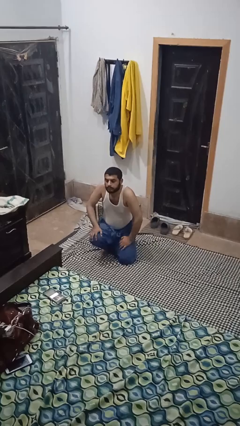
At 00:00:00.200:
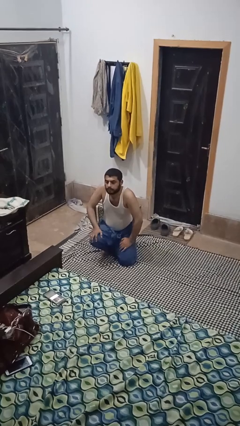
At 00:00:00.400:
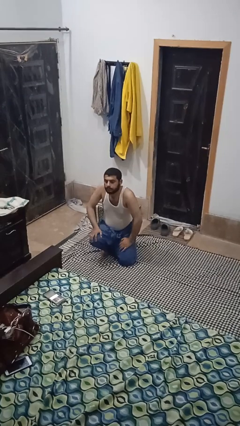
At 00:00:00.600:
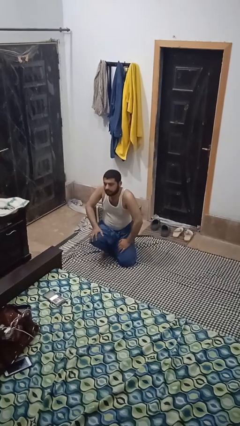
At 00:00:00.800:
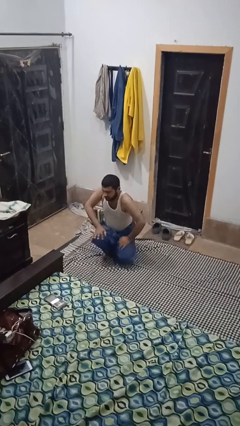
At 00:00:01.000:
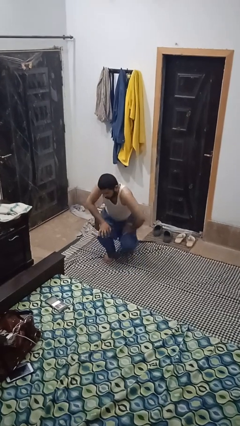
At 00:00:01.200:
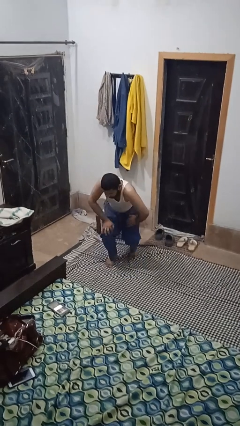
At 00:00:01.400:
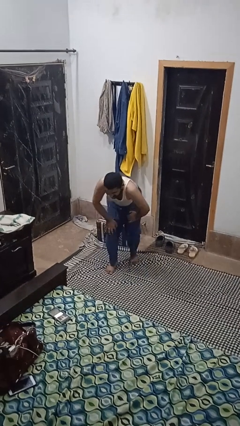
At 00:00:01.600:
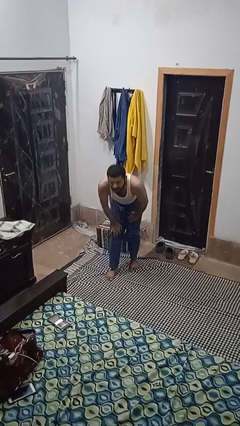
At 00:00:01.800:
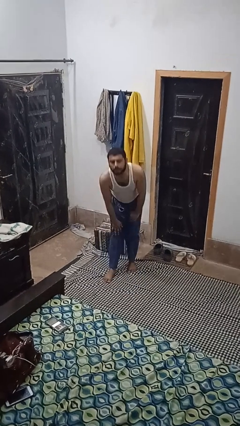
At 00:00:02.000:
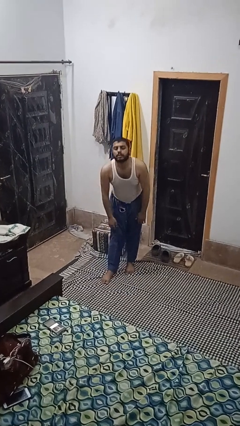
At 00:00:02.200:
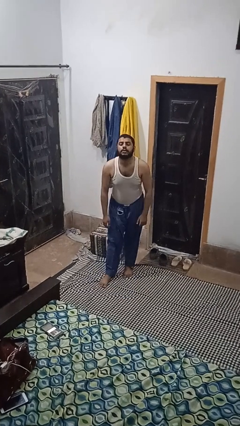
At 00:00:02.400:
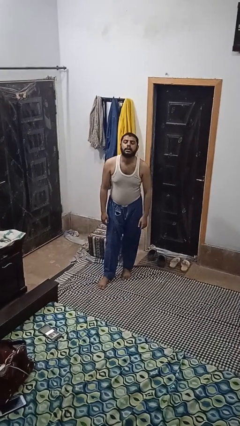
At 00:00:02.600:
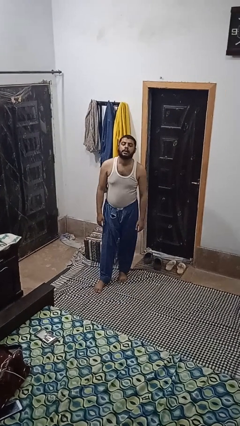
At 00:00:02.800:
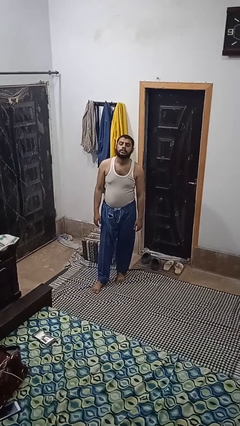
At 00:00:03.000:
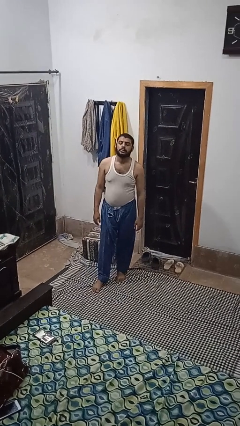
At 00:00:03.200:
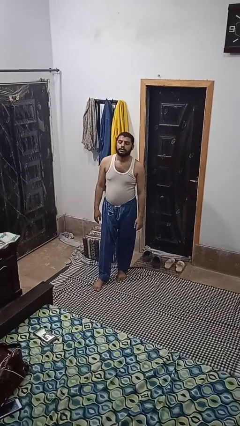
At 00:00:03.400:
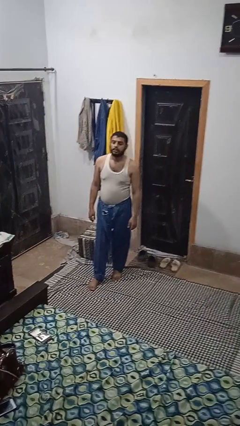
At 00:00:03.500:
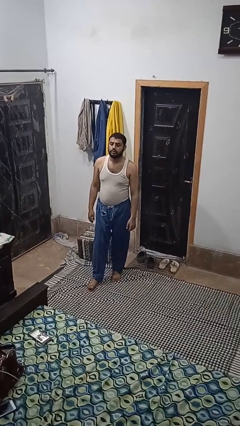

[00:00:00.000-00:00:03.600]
person stands up from floor

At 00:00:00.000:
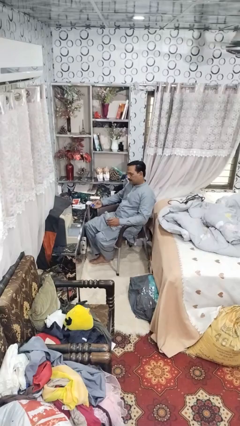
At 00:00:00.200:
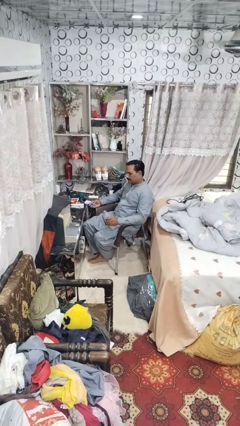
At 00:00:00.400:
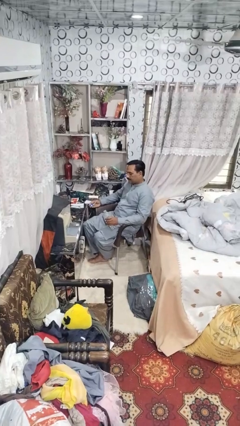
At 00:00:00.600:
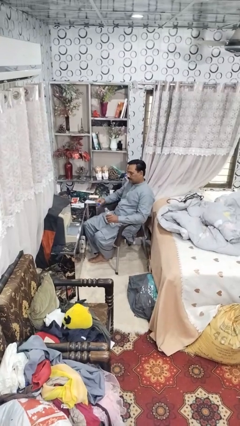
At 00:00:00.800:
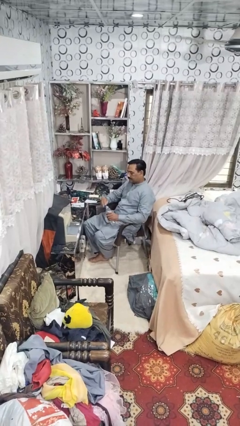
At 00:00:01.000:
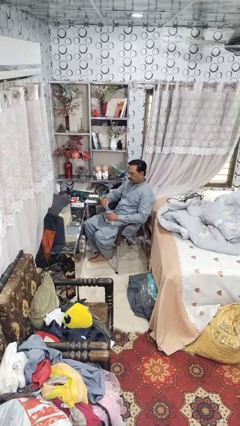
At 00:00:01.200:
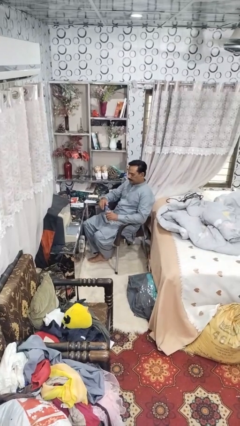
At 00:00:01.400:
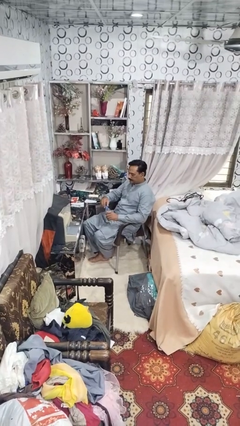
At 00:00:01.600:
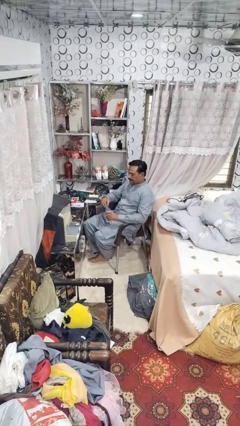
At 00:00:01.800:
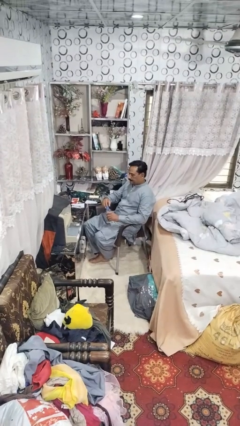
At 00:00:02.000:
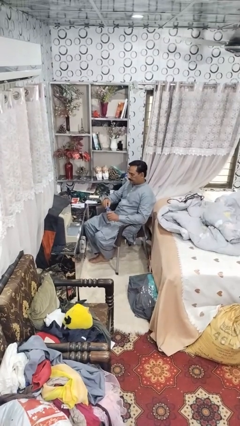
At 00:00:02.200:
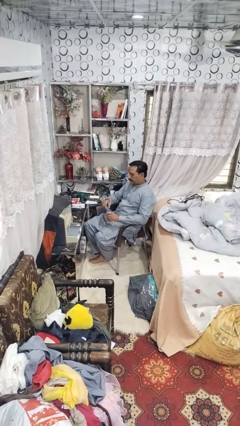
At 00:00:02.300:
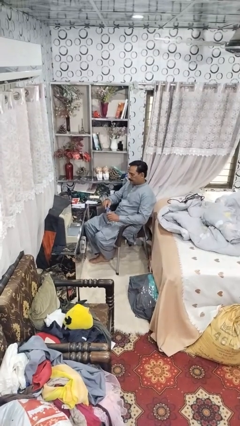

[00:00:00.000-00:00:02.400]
person screws lid to bottle

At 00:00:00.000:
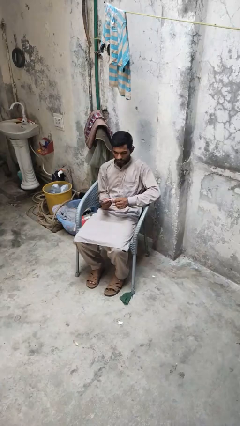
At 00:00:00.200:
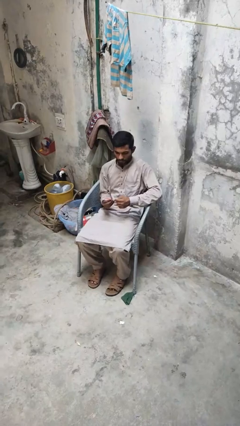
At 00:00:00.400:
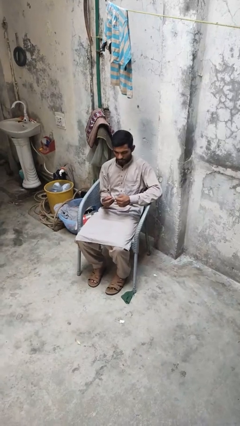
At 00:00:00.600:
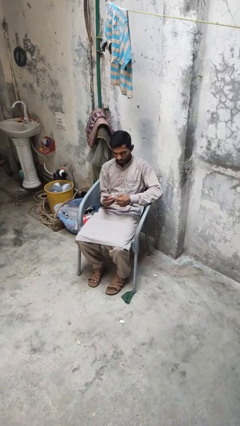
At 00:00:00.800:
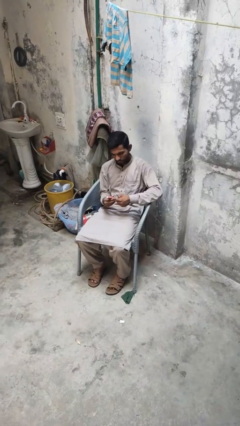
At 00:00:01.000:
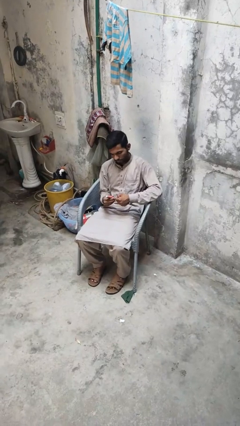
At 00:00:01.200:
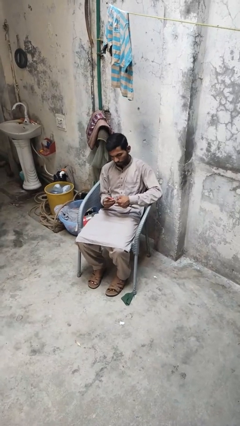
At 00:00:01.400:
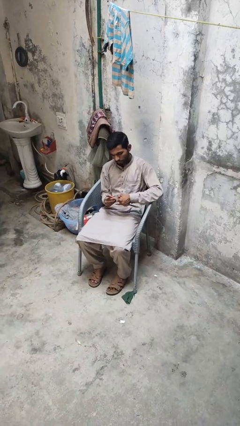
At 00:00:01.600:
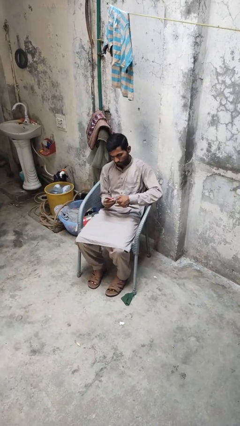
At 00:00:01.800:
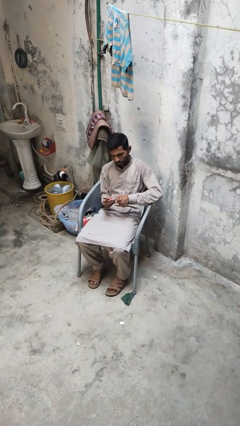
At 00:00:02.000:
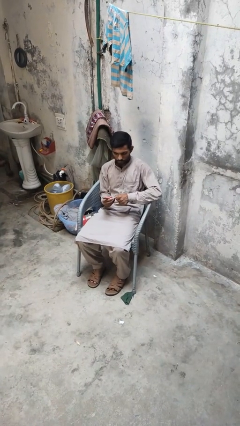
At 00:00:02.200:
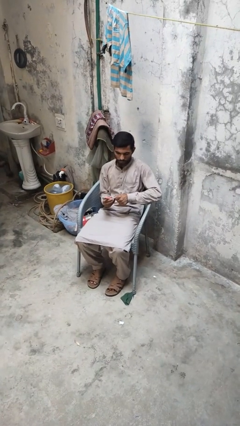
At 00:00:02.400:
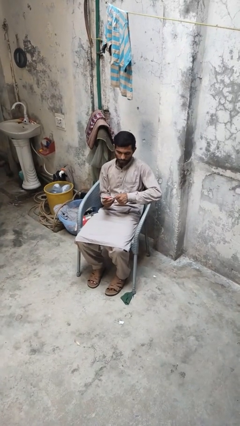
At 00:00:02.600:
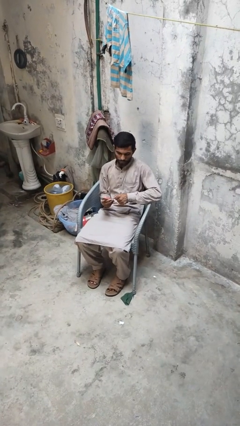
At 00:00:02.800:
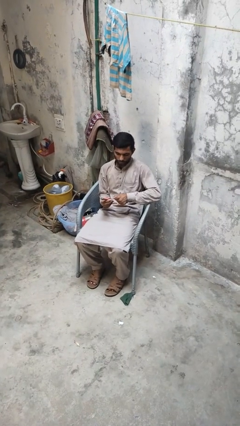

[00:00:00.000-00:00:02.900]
person files fingernails

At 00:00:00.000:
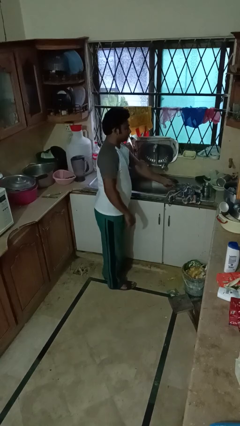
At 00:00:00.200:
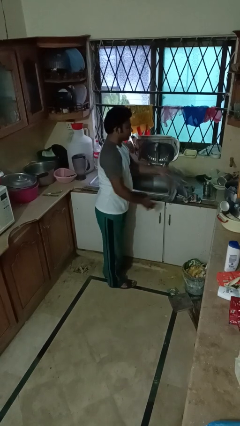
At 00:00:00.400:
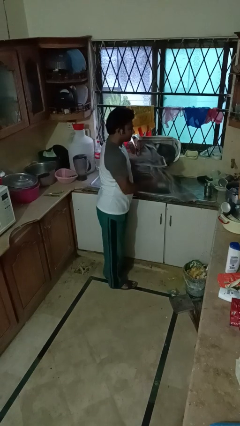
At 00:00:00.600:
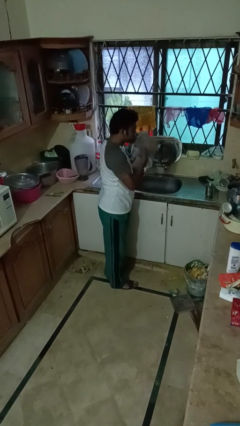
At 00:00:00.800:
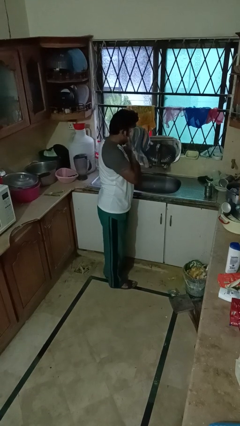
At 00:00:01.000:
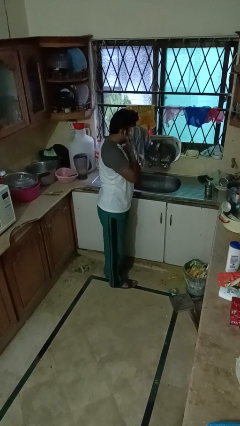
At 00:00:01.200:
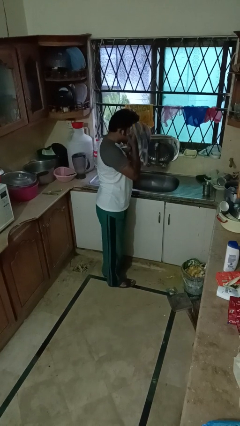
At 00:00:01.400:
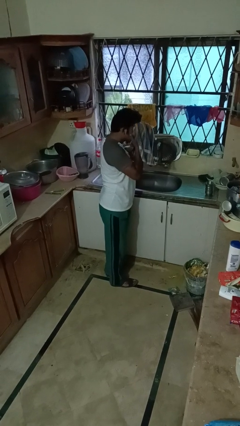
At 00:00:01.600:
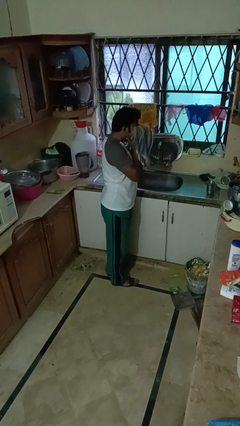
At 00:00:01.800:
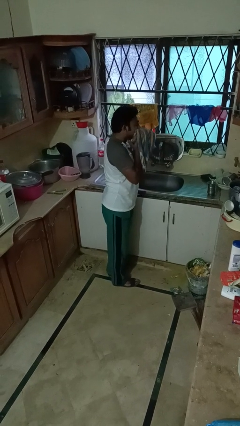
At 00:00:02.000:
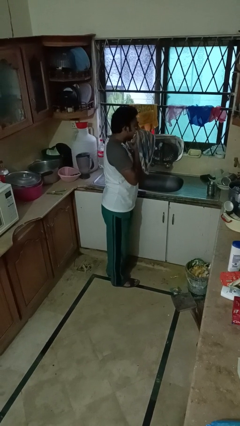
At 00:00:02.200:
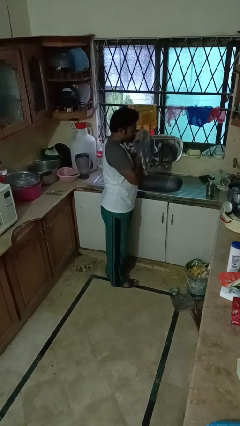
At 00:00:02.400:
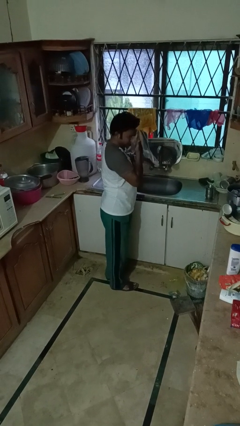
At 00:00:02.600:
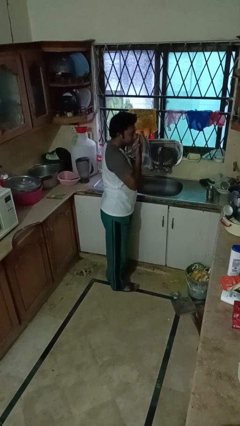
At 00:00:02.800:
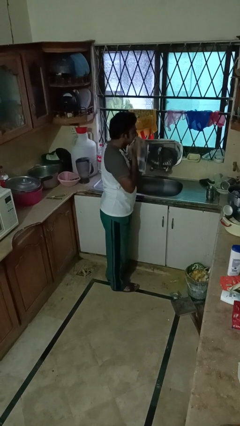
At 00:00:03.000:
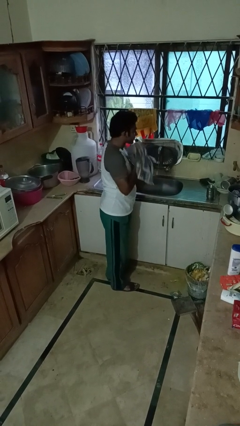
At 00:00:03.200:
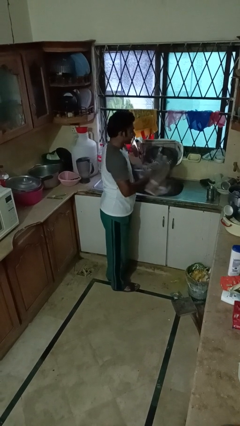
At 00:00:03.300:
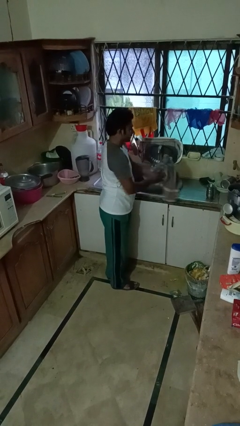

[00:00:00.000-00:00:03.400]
person dries face with towel

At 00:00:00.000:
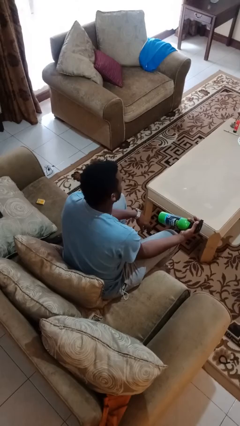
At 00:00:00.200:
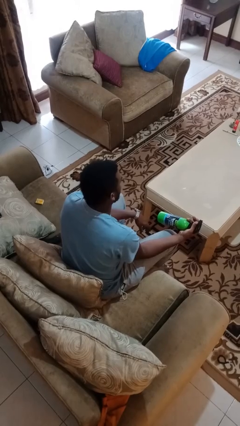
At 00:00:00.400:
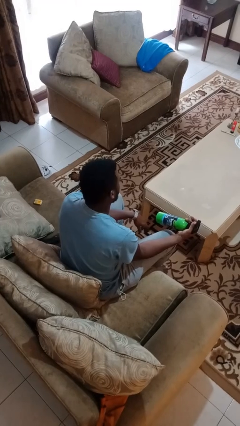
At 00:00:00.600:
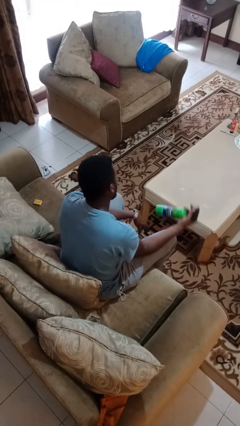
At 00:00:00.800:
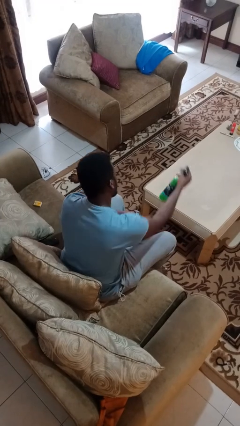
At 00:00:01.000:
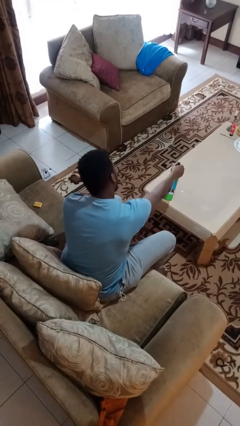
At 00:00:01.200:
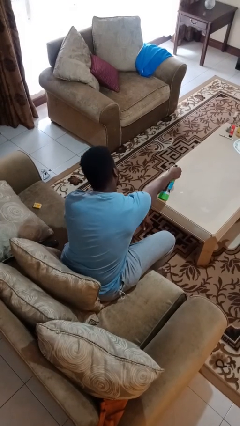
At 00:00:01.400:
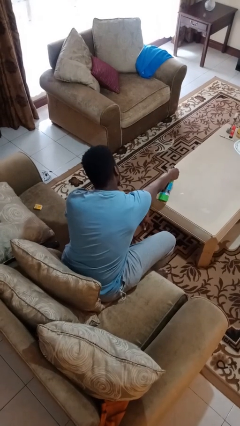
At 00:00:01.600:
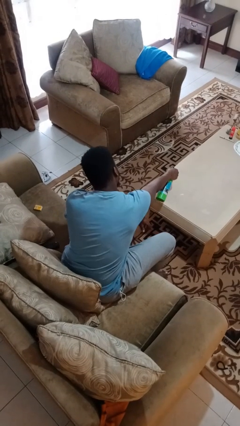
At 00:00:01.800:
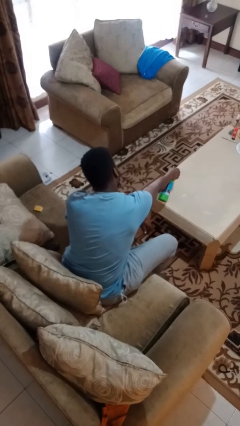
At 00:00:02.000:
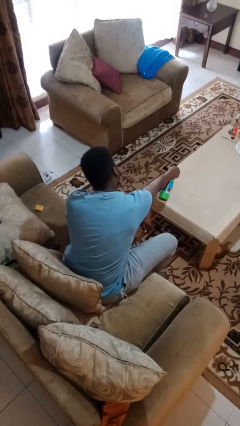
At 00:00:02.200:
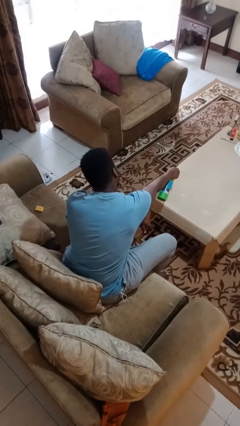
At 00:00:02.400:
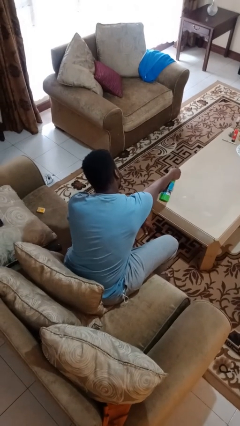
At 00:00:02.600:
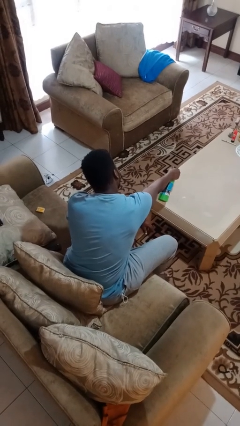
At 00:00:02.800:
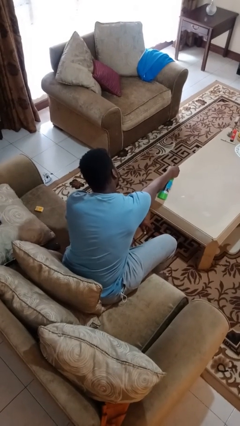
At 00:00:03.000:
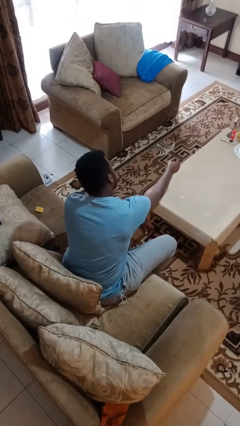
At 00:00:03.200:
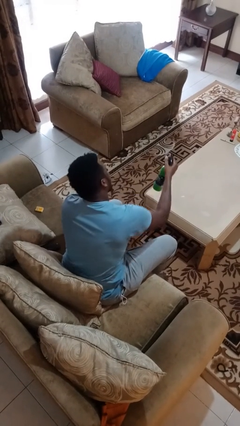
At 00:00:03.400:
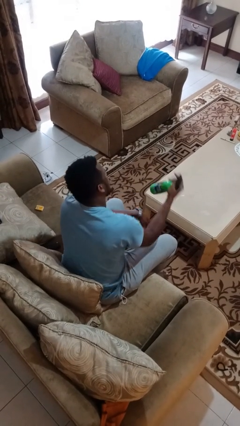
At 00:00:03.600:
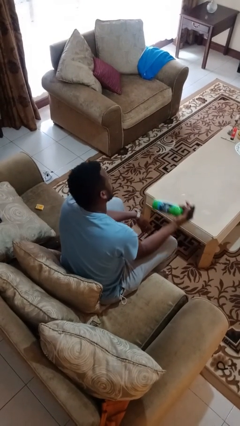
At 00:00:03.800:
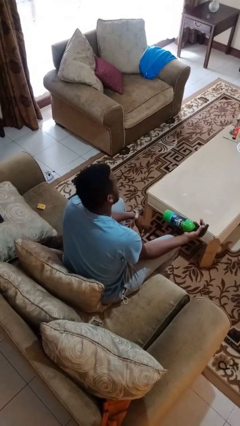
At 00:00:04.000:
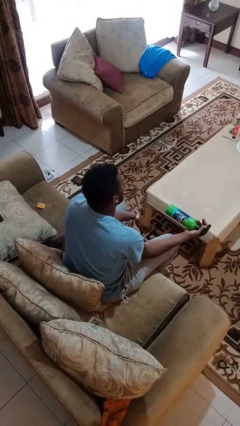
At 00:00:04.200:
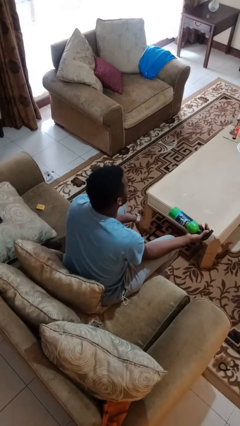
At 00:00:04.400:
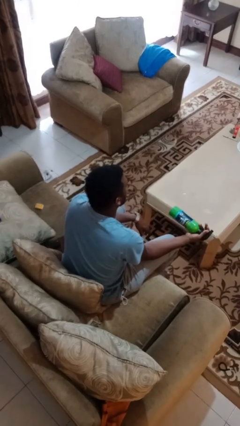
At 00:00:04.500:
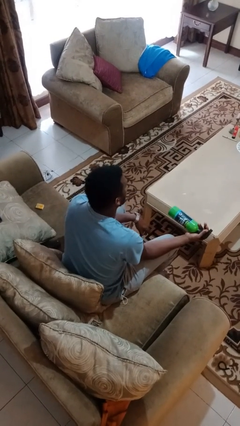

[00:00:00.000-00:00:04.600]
person sprays from bottle

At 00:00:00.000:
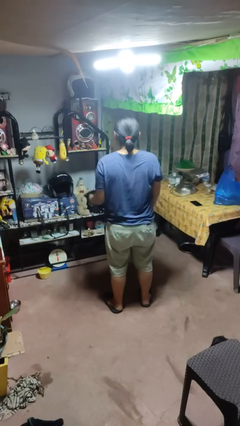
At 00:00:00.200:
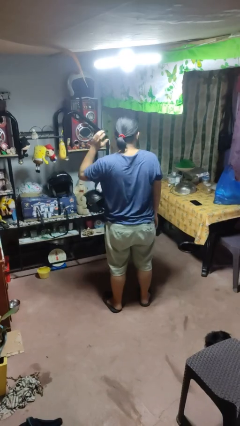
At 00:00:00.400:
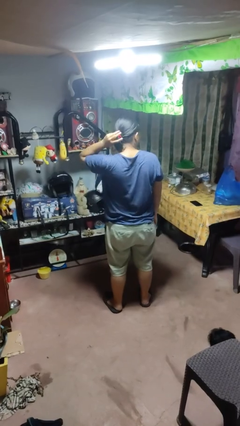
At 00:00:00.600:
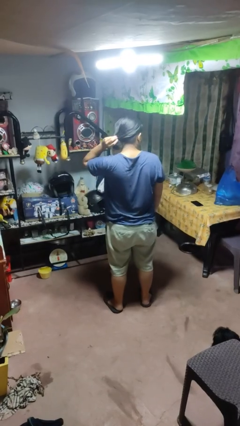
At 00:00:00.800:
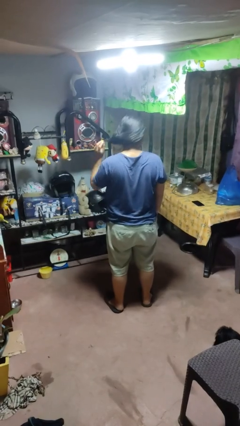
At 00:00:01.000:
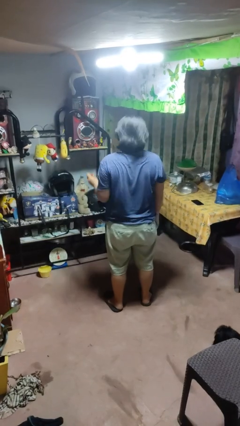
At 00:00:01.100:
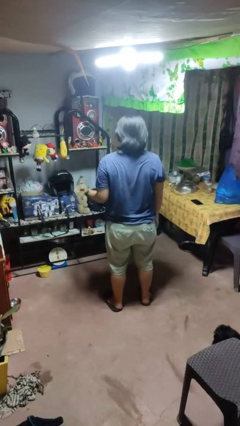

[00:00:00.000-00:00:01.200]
person takes off hairtie
